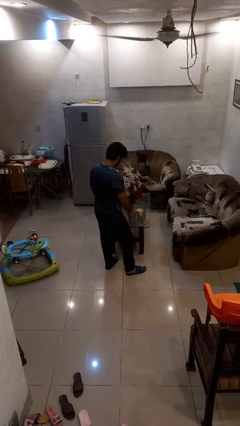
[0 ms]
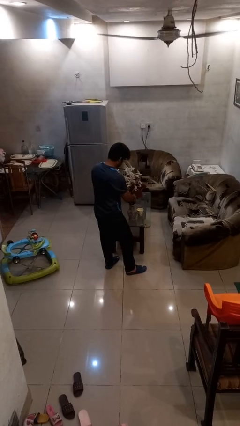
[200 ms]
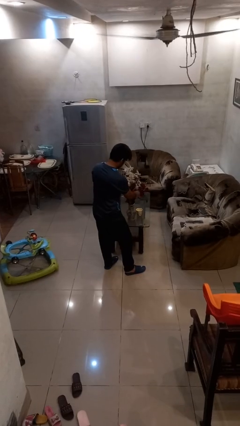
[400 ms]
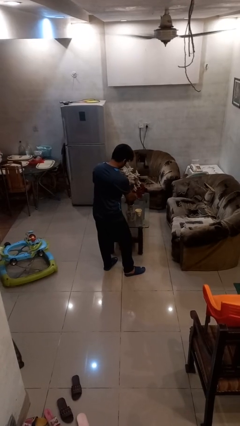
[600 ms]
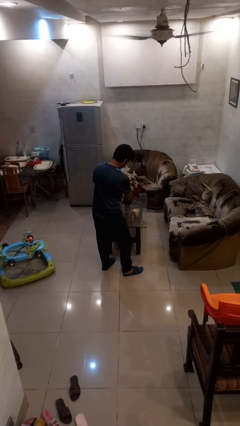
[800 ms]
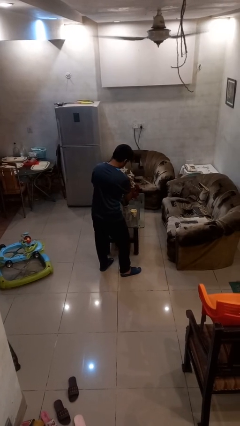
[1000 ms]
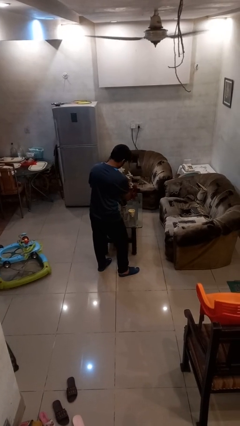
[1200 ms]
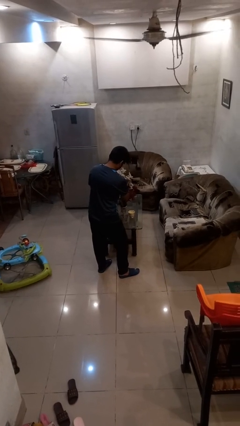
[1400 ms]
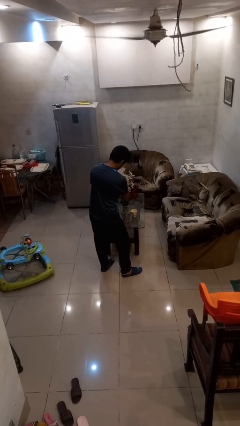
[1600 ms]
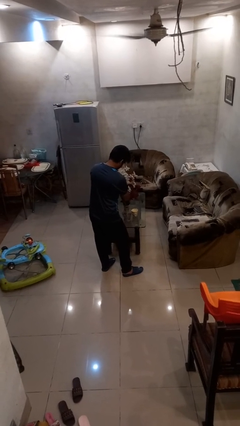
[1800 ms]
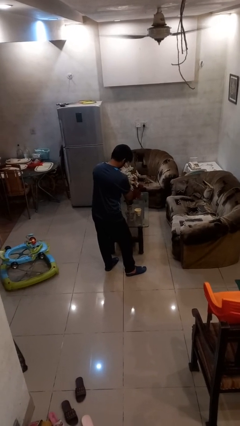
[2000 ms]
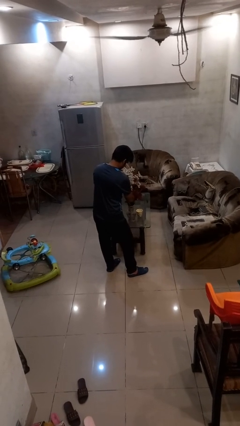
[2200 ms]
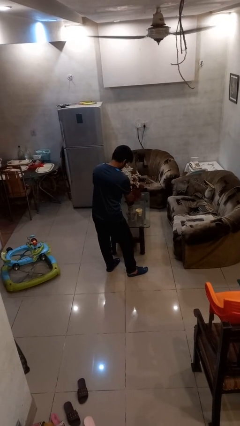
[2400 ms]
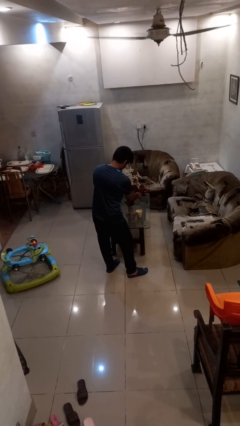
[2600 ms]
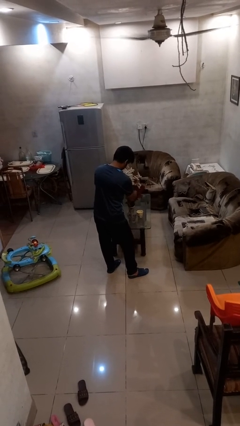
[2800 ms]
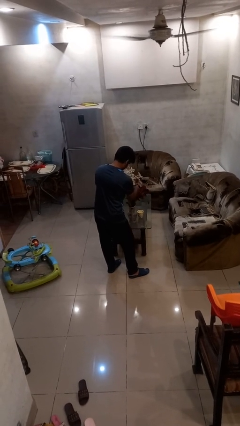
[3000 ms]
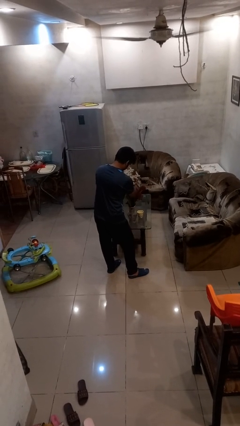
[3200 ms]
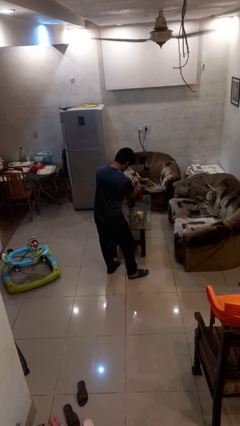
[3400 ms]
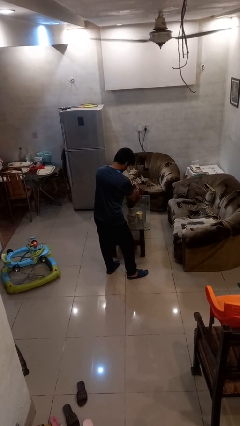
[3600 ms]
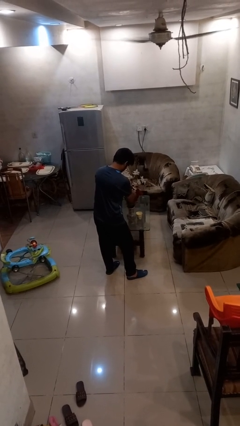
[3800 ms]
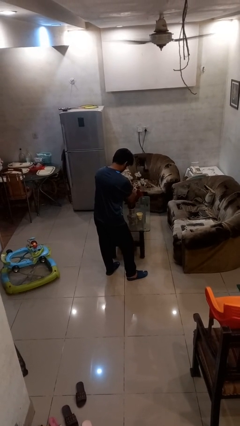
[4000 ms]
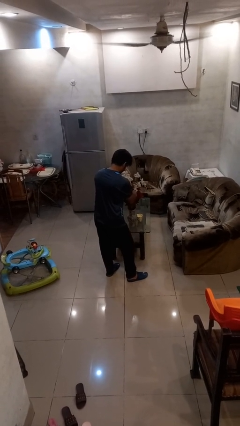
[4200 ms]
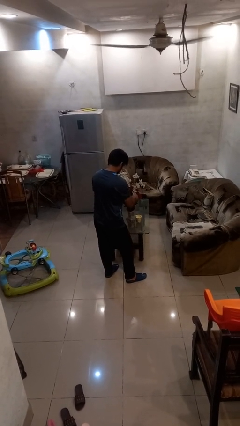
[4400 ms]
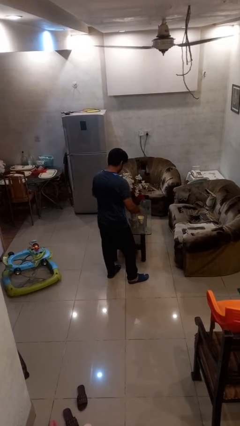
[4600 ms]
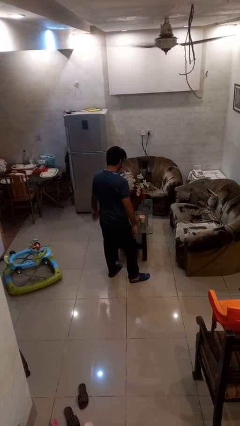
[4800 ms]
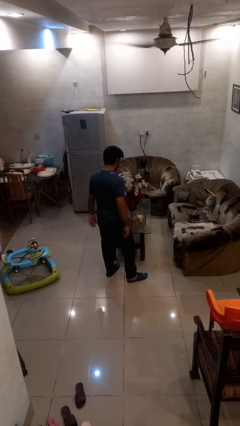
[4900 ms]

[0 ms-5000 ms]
person arranges flowers in vase

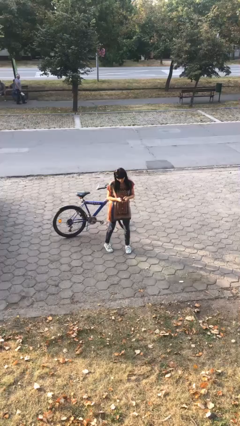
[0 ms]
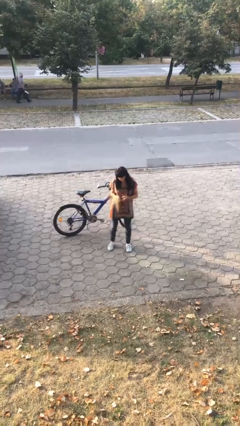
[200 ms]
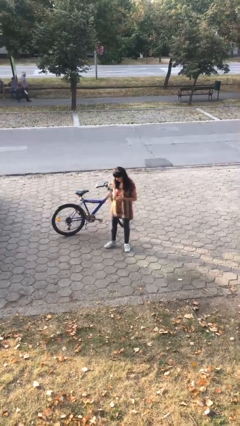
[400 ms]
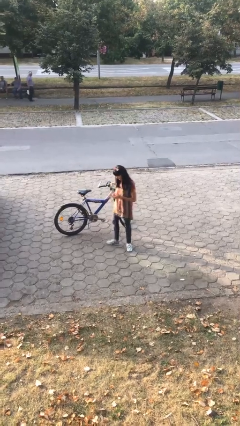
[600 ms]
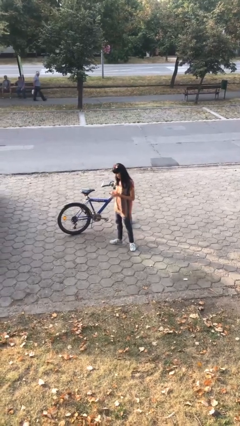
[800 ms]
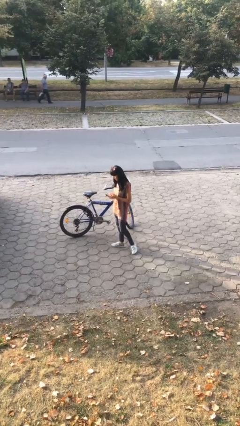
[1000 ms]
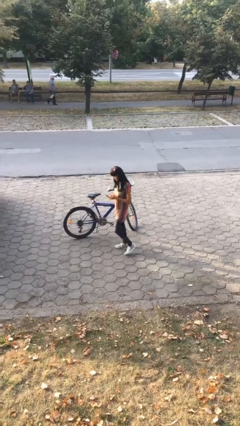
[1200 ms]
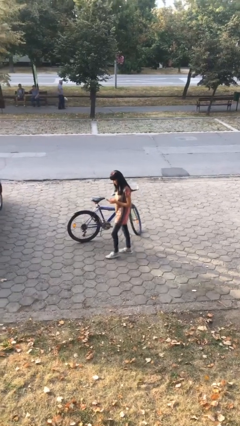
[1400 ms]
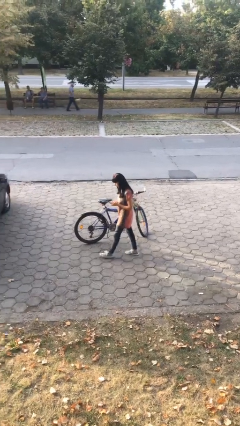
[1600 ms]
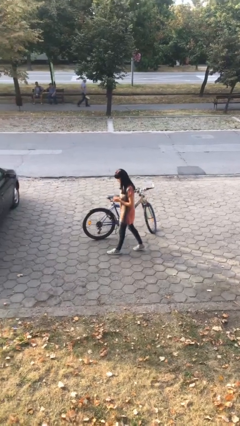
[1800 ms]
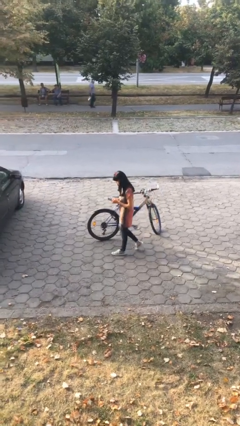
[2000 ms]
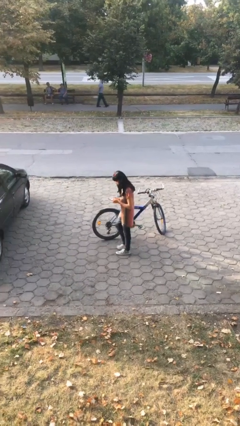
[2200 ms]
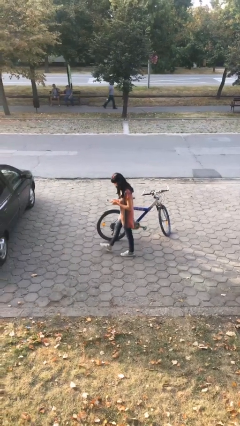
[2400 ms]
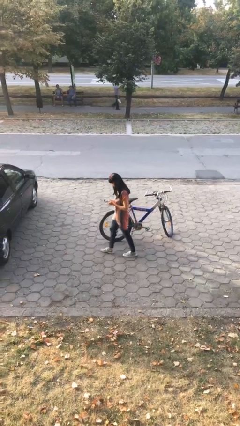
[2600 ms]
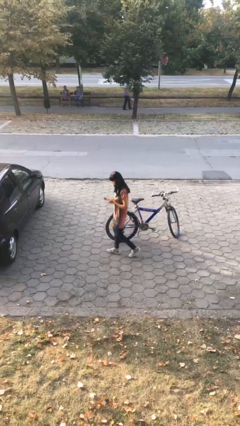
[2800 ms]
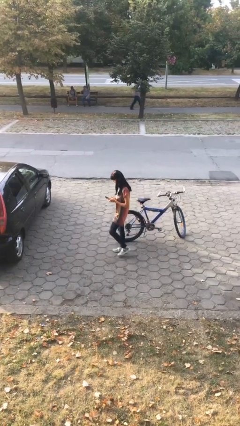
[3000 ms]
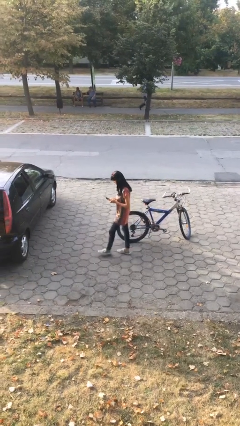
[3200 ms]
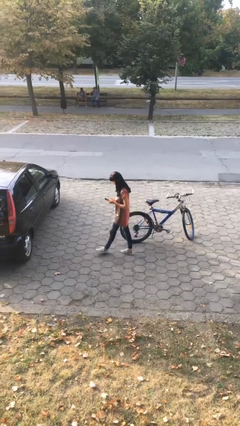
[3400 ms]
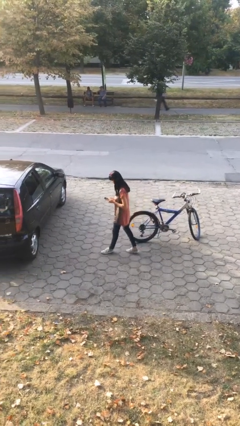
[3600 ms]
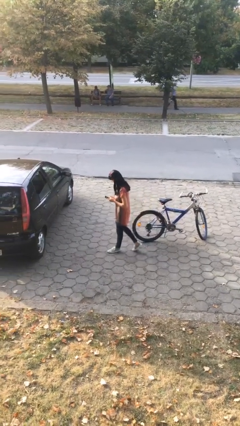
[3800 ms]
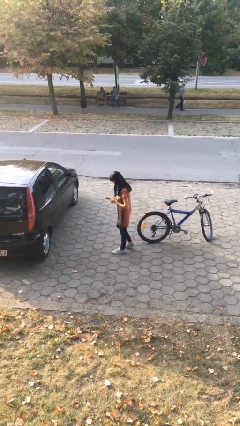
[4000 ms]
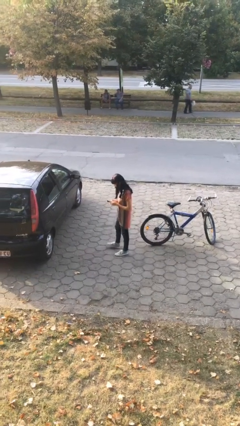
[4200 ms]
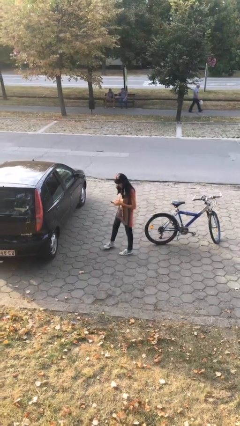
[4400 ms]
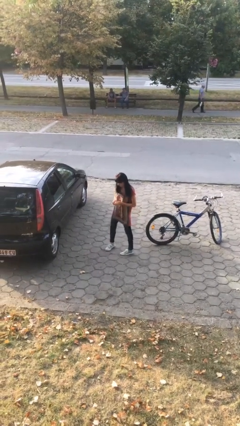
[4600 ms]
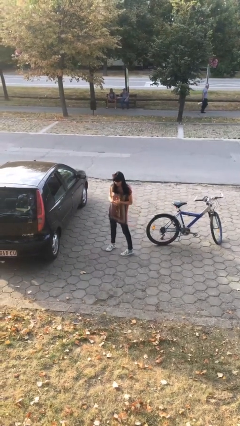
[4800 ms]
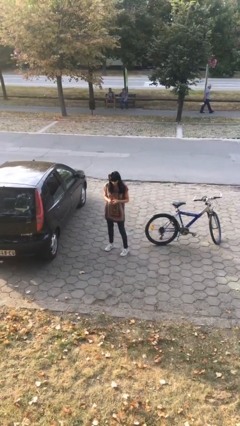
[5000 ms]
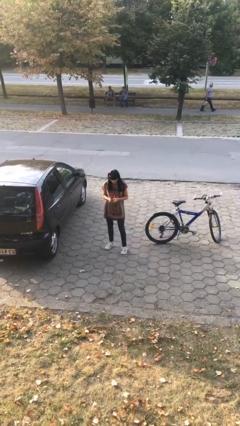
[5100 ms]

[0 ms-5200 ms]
person texts on phone

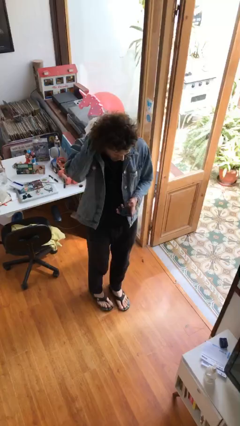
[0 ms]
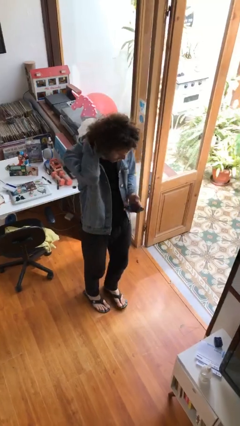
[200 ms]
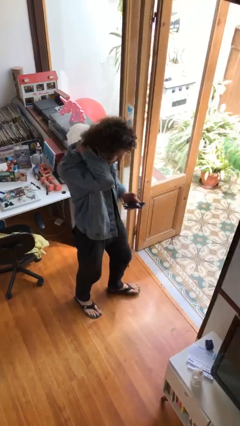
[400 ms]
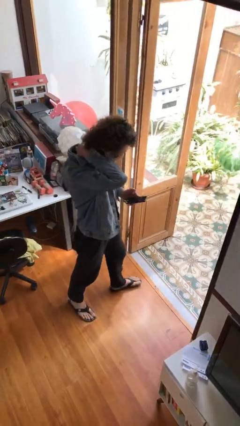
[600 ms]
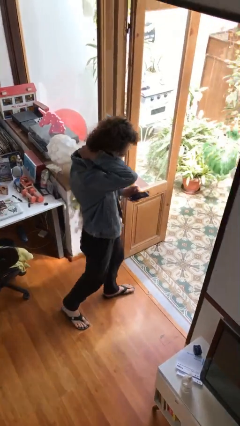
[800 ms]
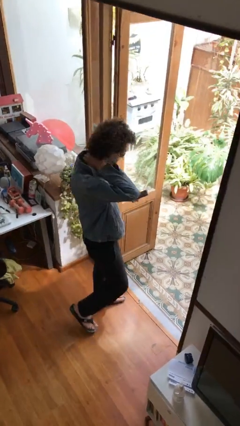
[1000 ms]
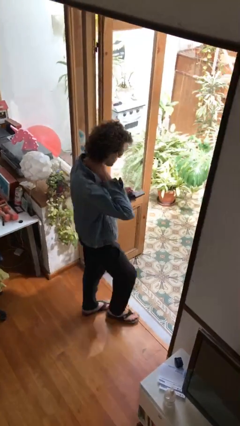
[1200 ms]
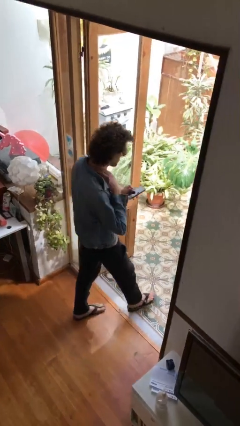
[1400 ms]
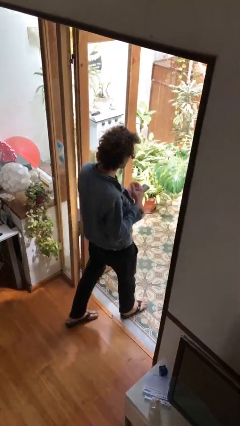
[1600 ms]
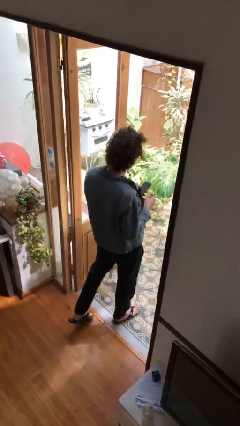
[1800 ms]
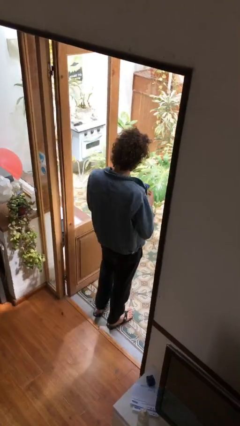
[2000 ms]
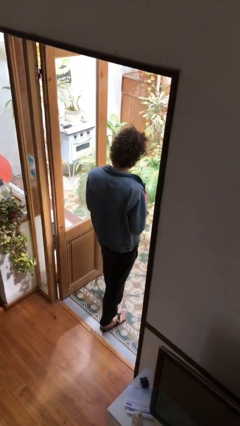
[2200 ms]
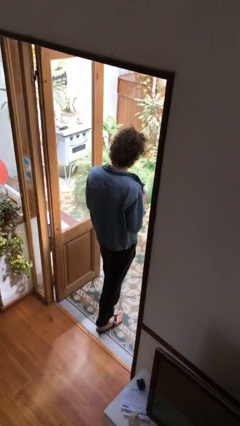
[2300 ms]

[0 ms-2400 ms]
person exits scene through structure

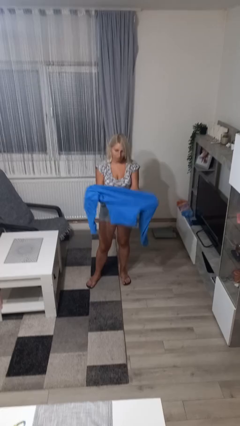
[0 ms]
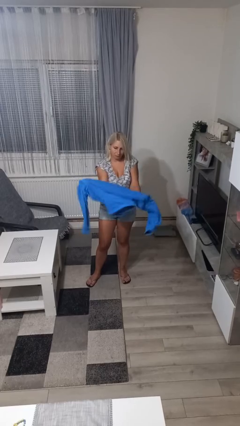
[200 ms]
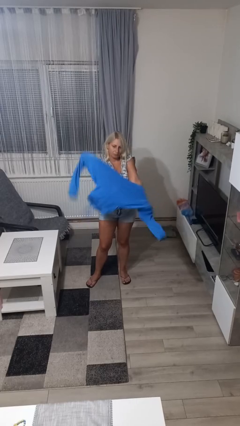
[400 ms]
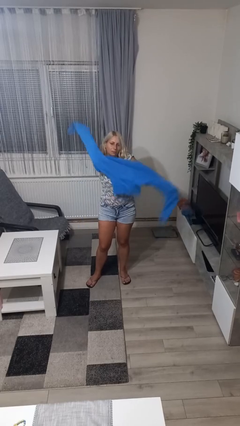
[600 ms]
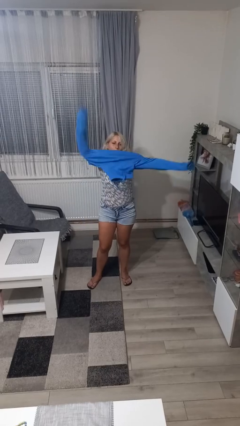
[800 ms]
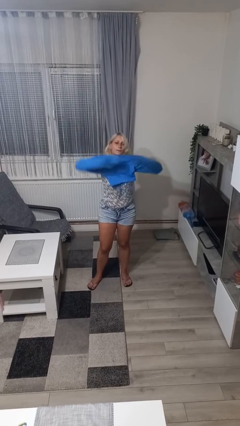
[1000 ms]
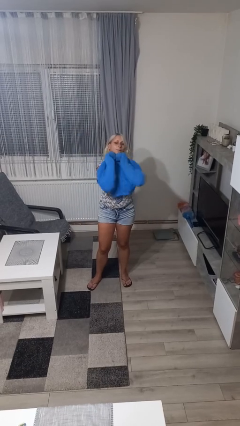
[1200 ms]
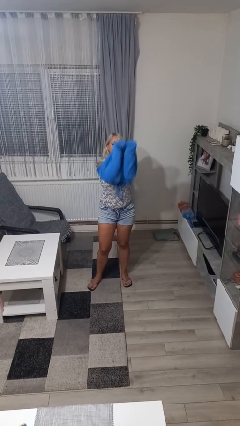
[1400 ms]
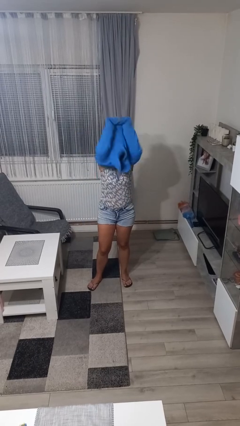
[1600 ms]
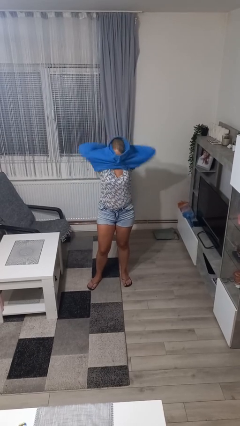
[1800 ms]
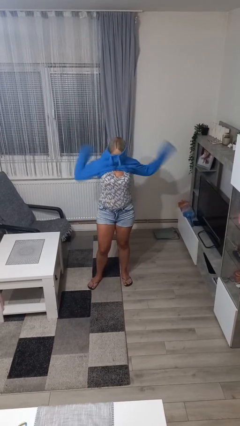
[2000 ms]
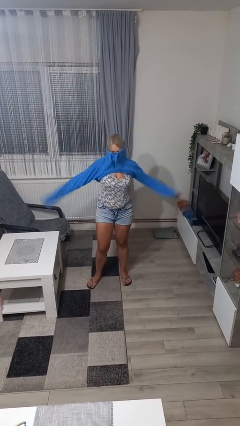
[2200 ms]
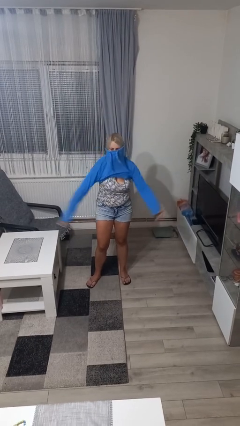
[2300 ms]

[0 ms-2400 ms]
person puts on hoodie

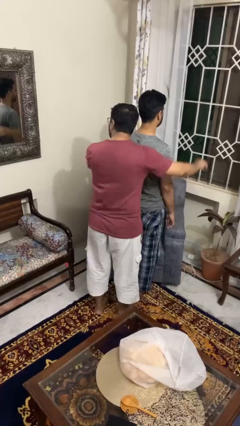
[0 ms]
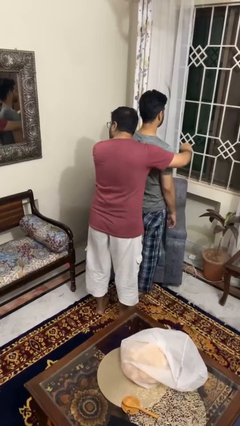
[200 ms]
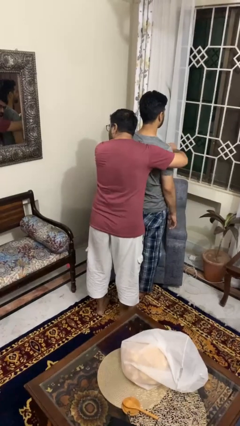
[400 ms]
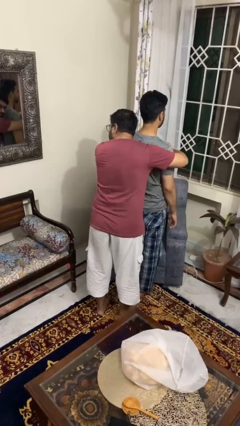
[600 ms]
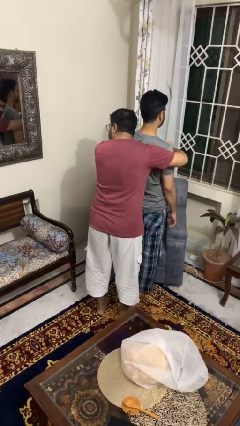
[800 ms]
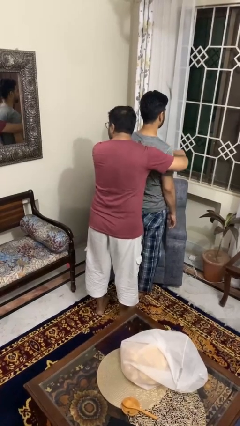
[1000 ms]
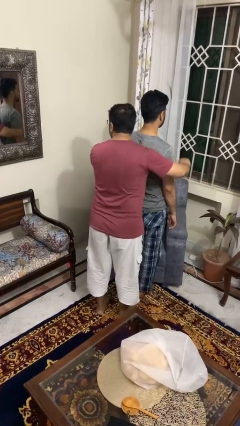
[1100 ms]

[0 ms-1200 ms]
person hugs person from behind

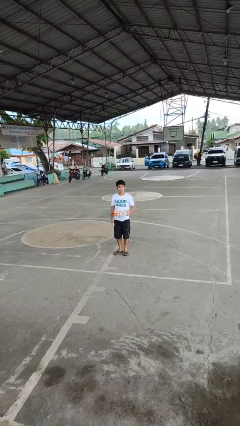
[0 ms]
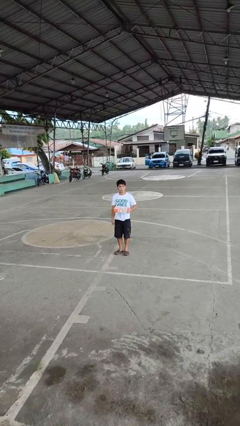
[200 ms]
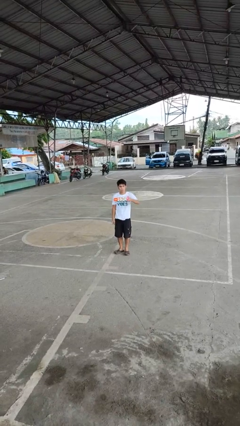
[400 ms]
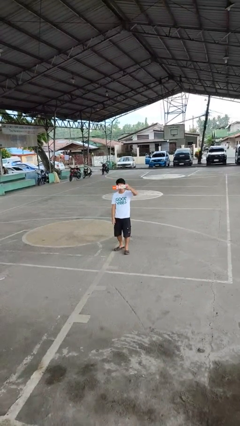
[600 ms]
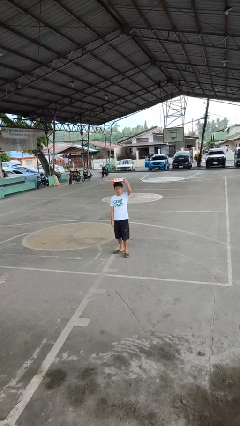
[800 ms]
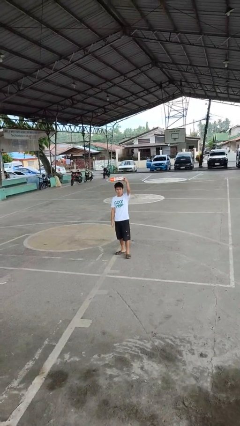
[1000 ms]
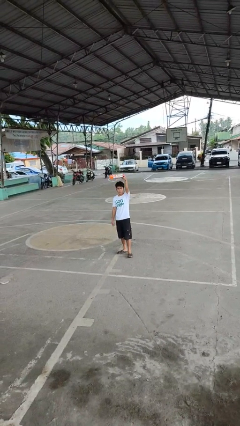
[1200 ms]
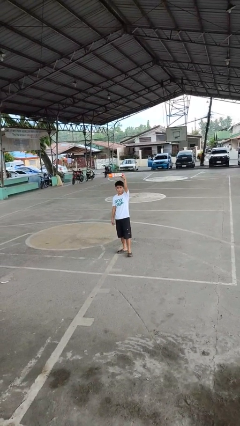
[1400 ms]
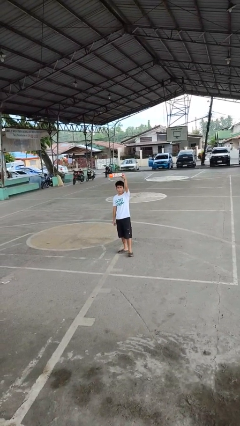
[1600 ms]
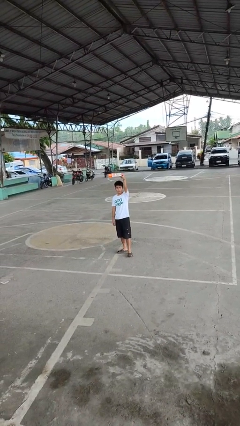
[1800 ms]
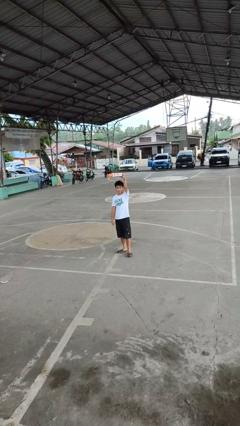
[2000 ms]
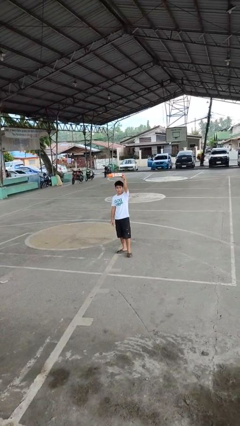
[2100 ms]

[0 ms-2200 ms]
person holds object above head
